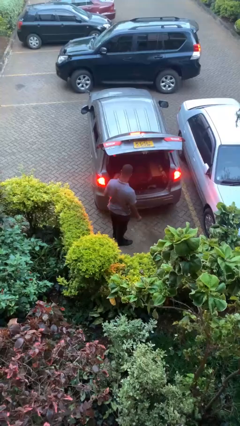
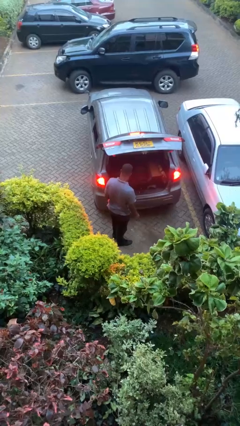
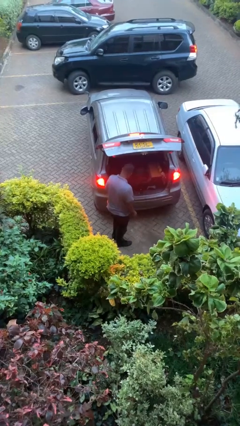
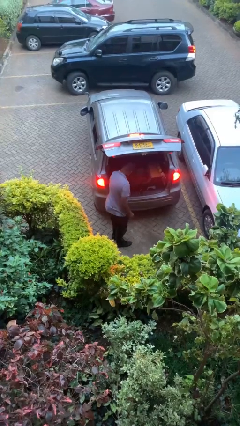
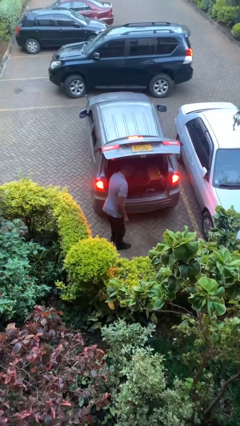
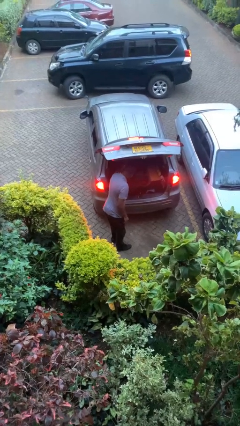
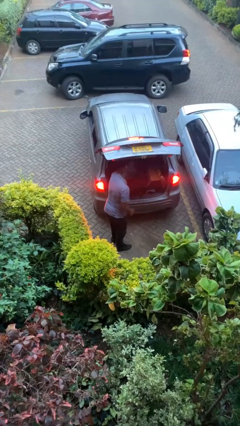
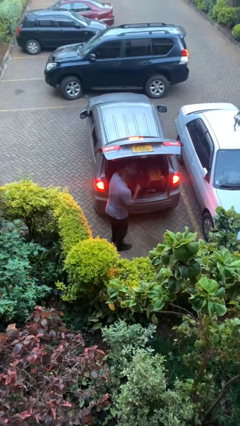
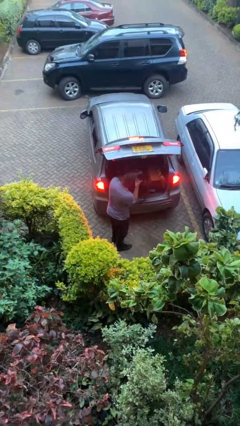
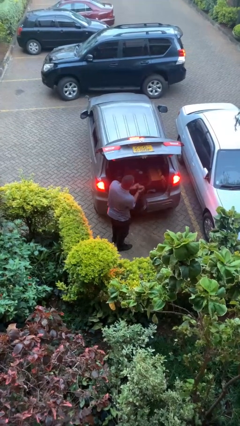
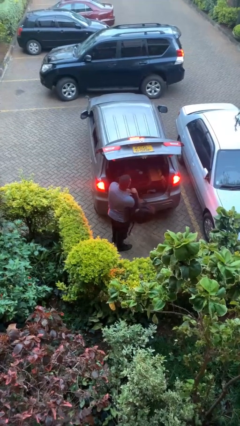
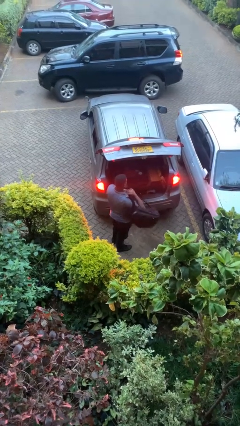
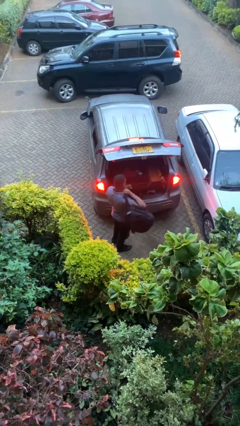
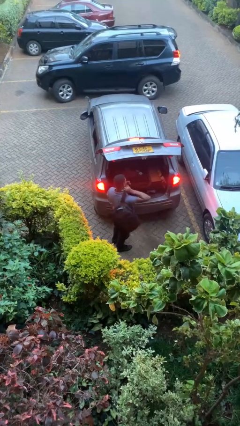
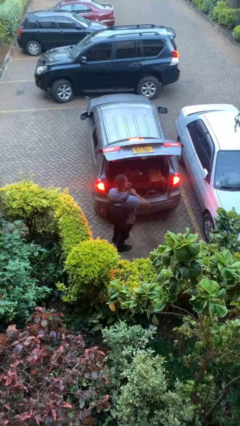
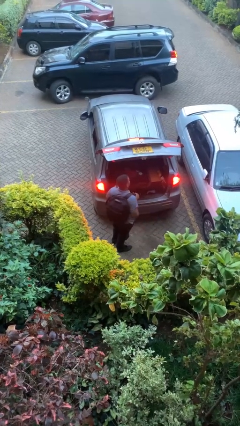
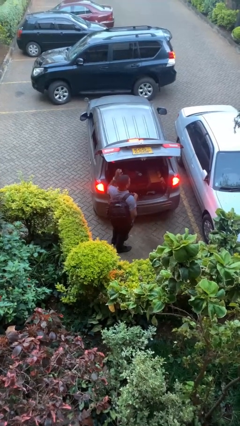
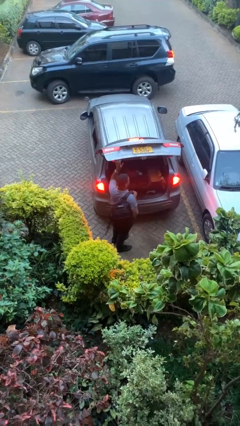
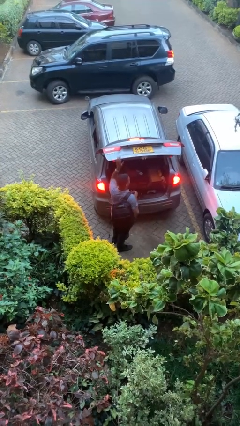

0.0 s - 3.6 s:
person unloads car

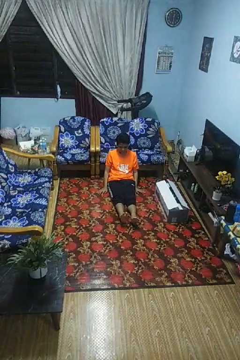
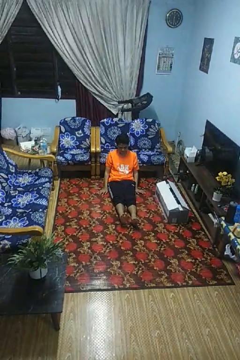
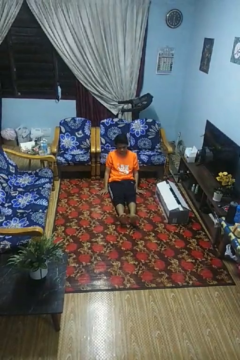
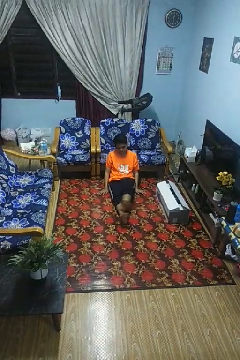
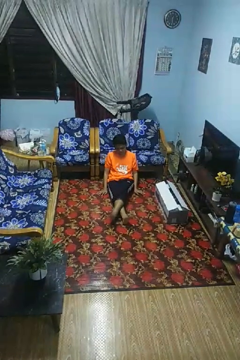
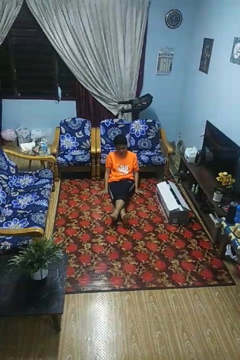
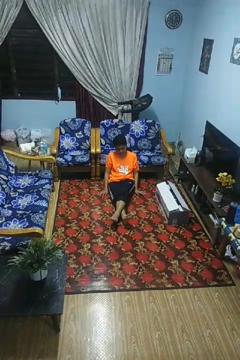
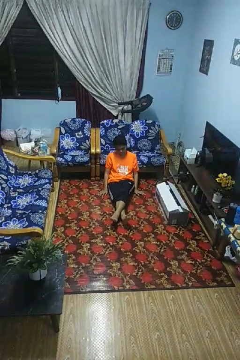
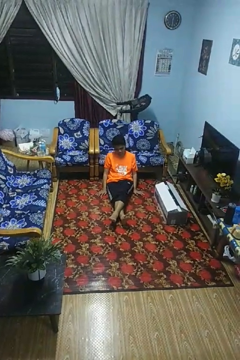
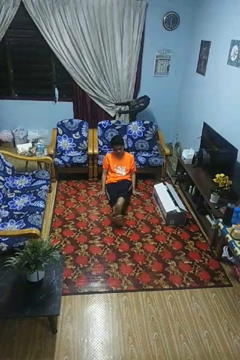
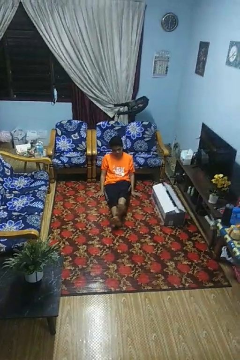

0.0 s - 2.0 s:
person crosses legs

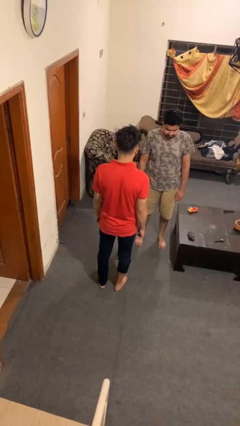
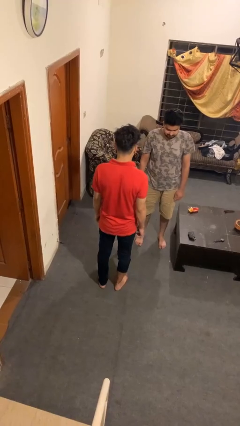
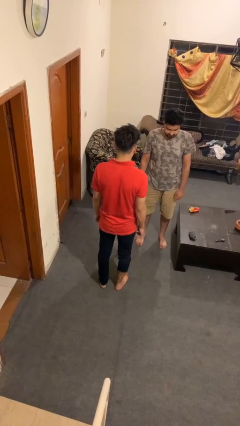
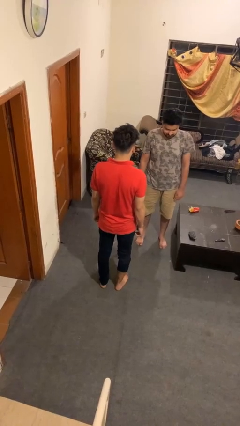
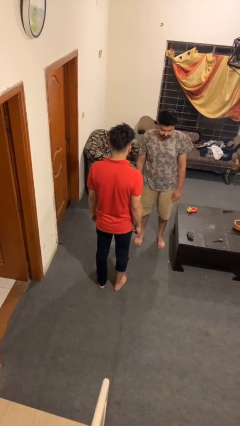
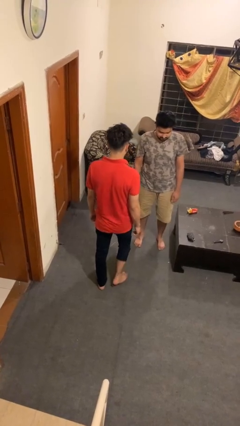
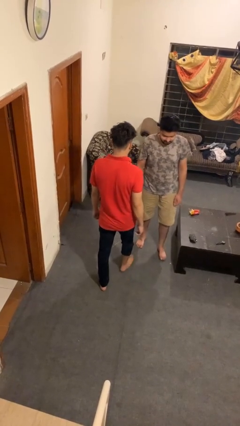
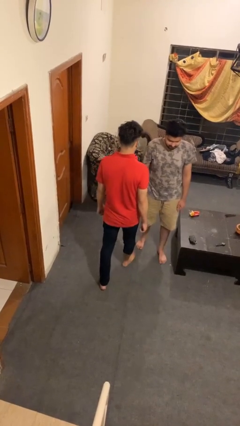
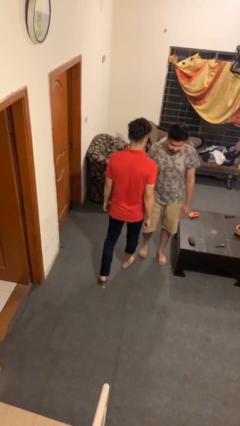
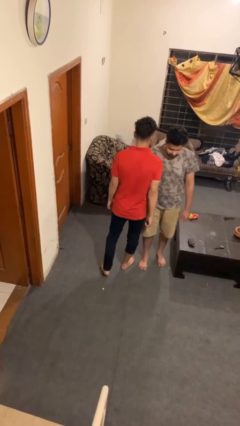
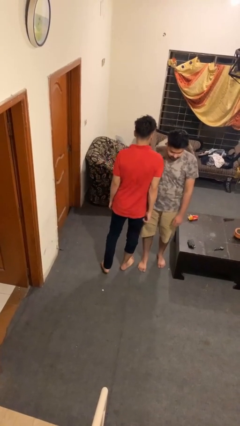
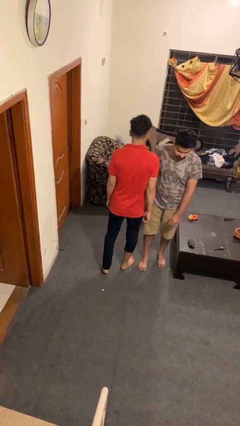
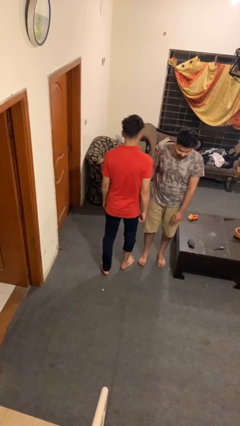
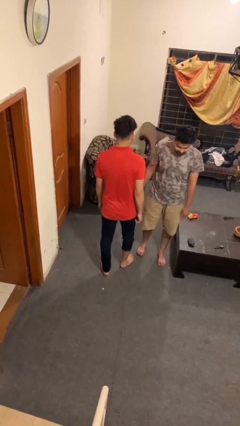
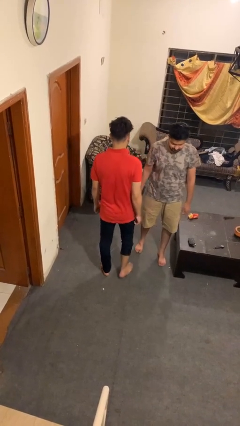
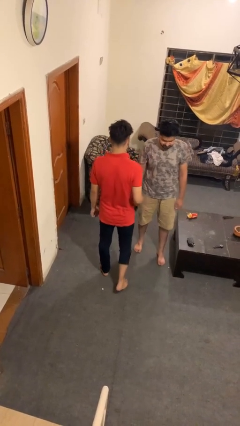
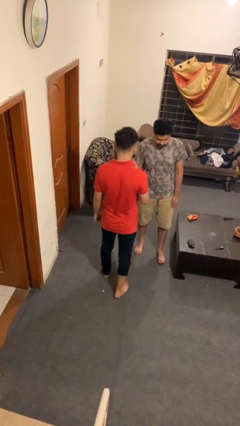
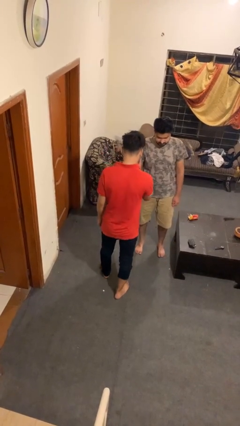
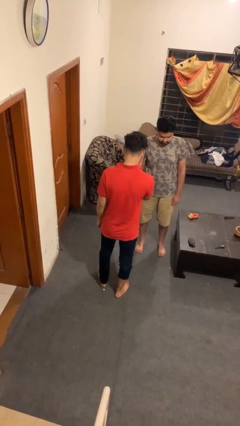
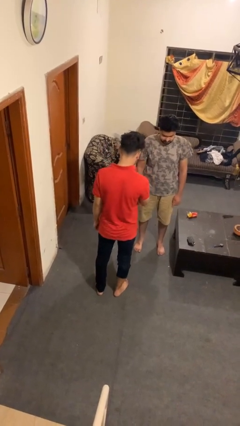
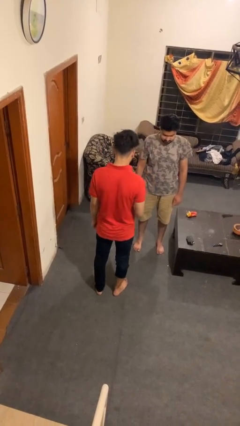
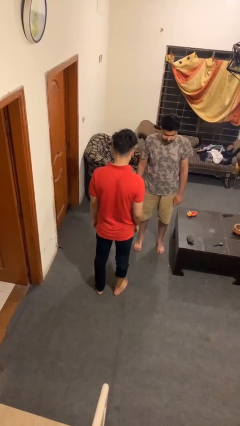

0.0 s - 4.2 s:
person bumps into person

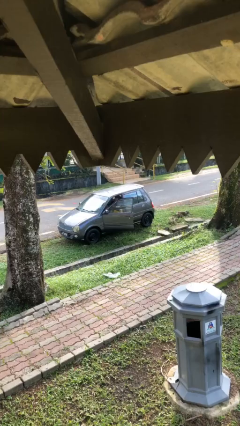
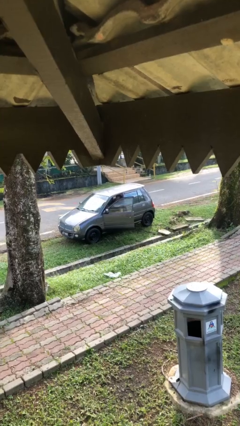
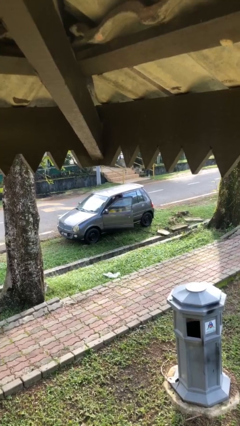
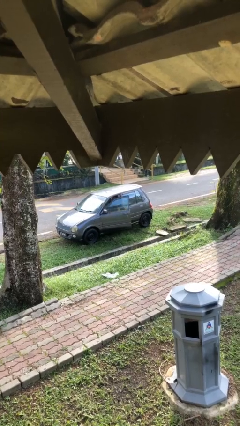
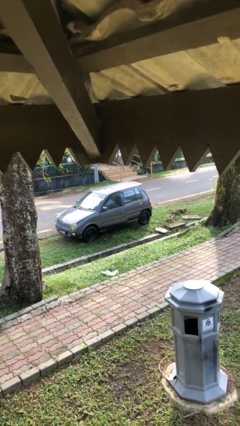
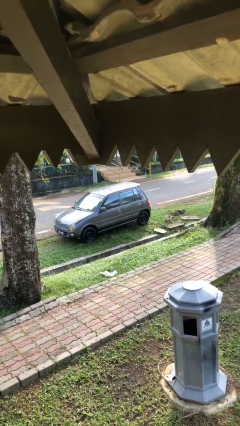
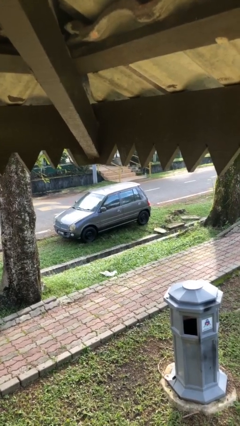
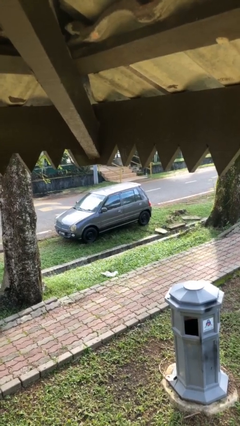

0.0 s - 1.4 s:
person closes car door

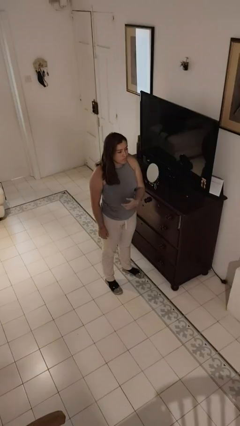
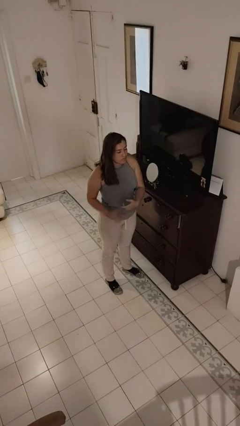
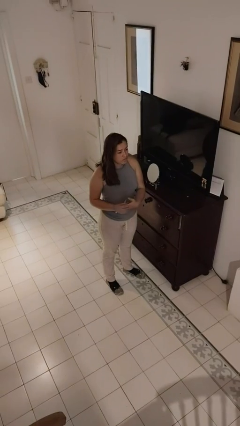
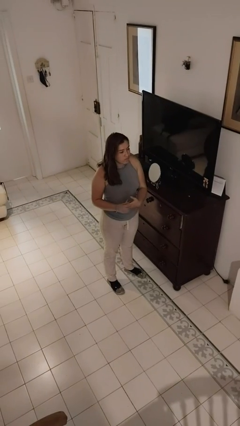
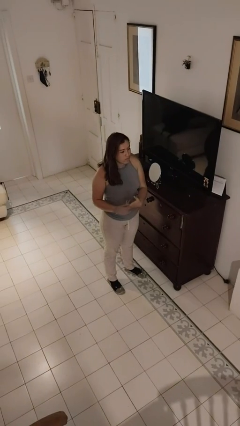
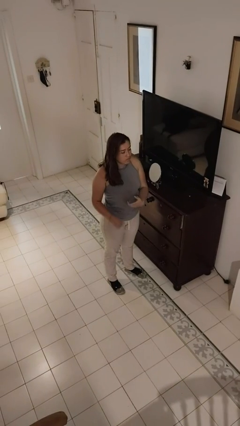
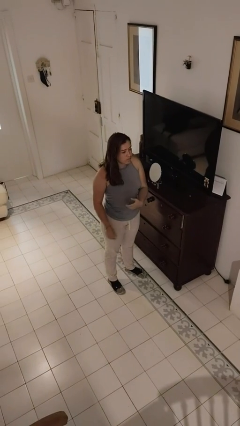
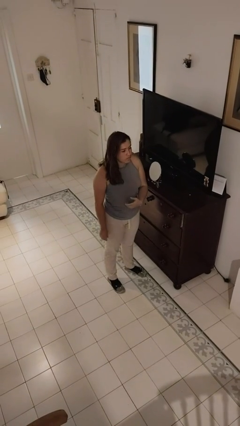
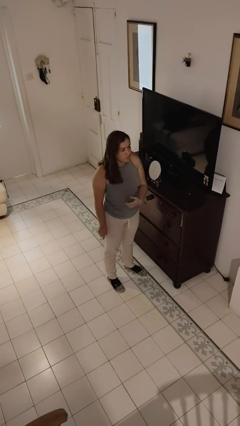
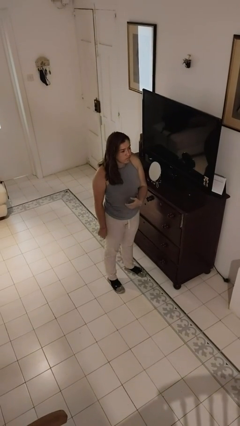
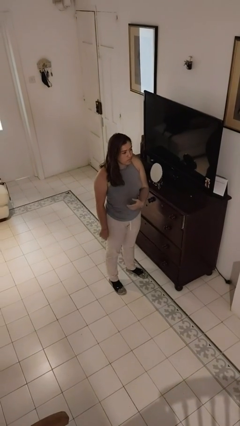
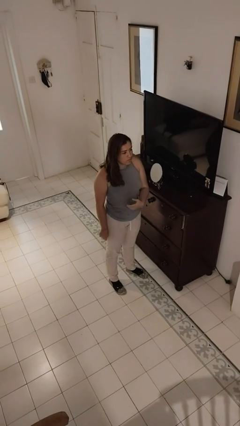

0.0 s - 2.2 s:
person takes off ring

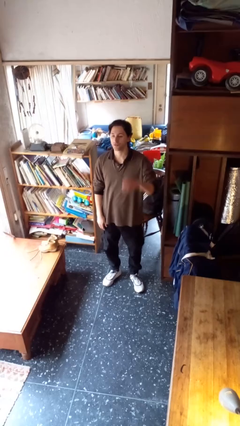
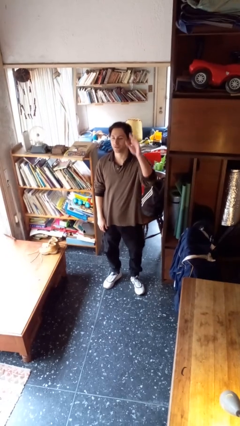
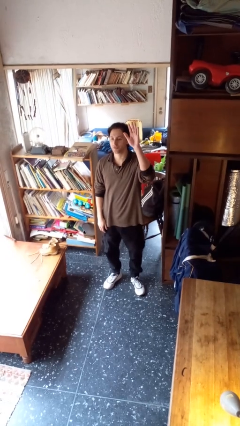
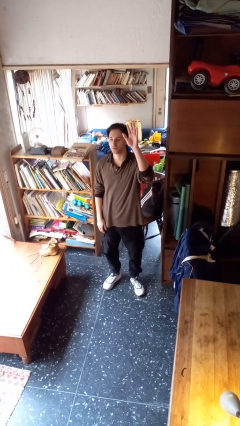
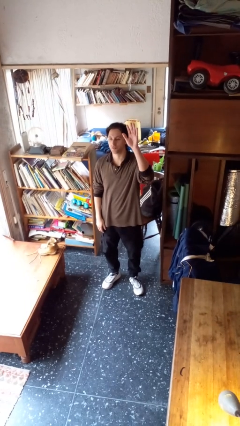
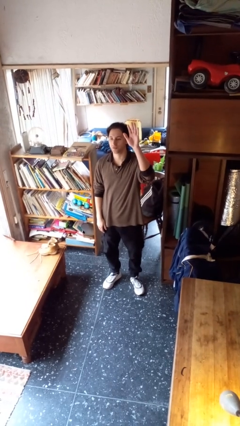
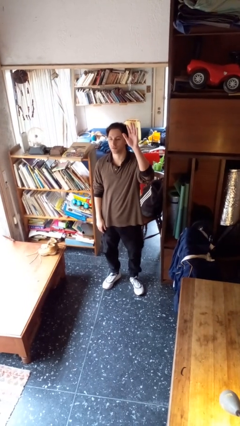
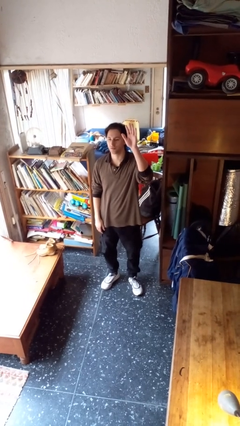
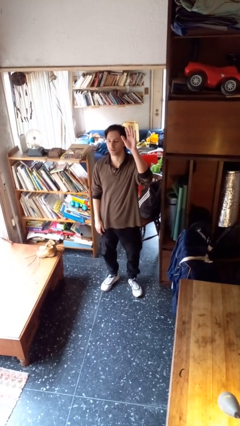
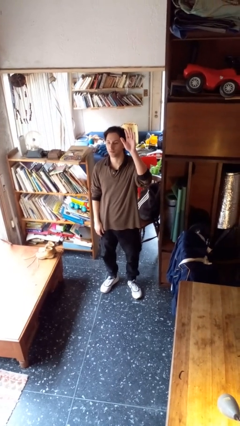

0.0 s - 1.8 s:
person gestures raise hand

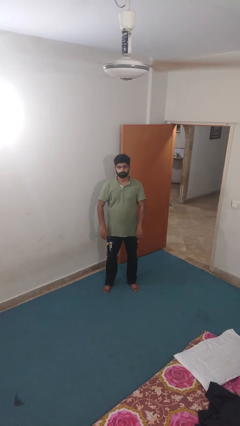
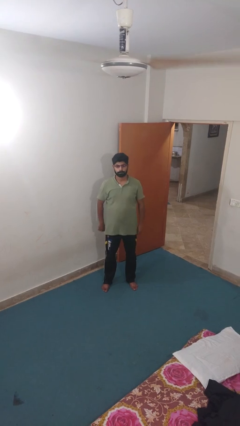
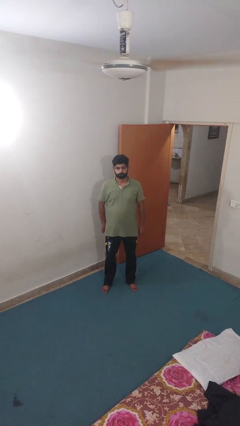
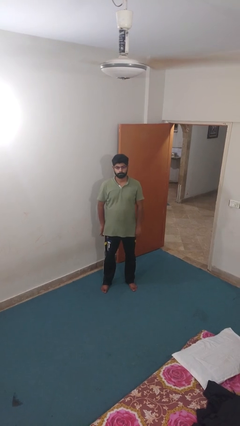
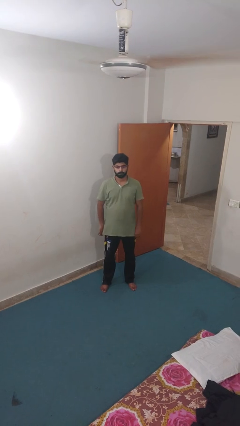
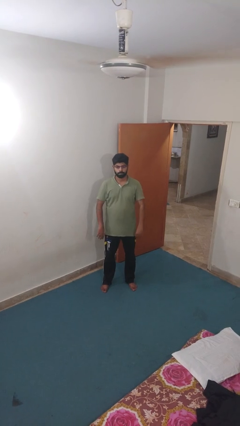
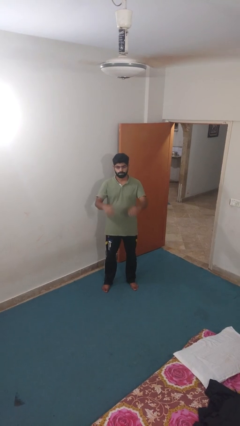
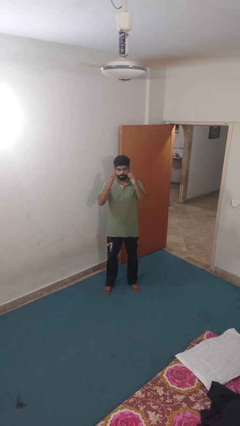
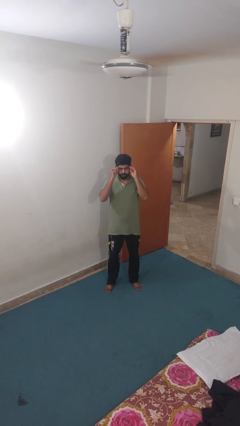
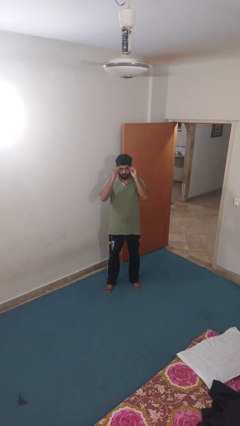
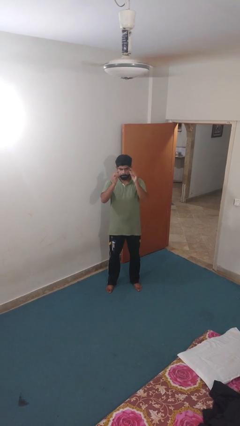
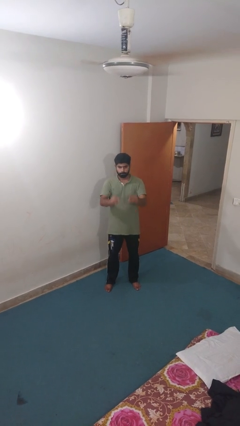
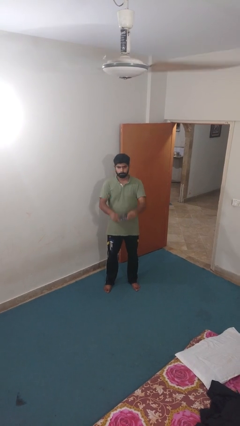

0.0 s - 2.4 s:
person takes off glasses
